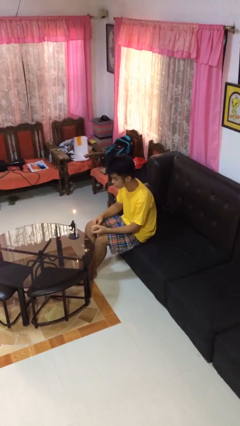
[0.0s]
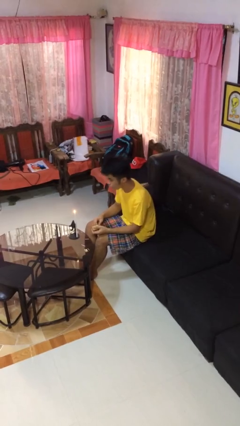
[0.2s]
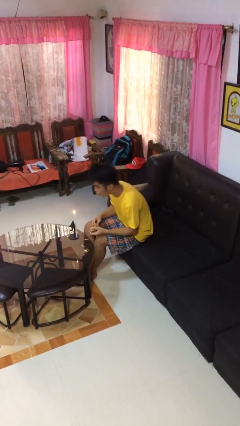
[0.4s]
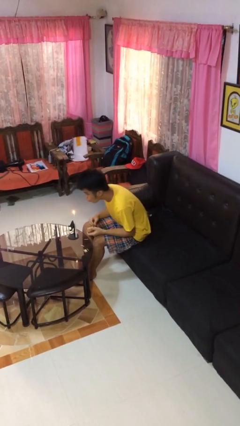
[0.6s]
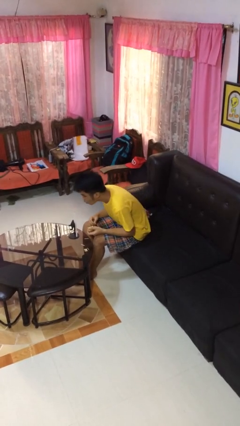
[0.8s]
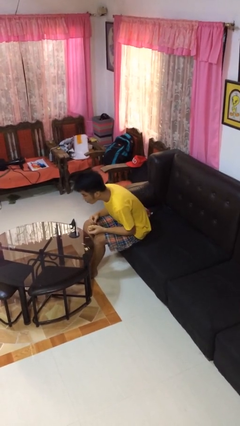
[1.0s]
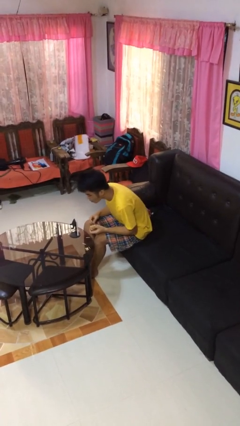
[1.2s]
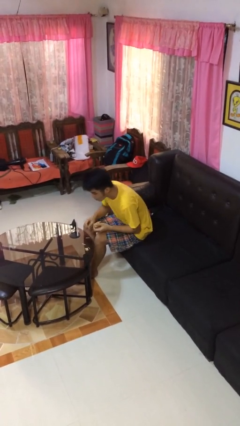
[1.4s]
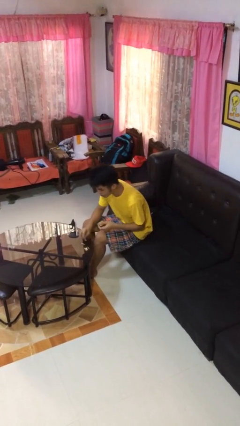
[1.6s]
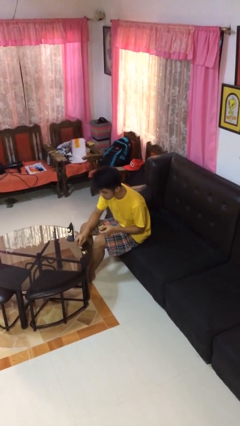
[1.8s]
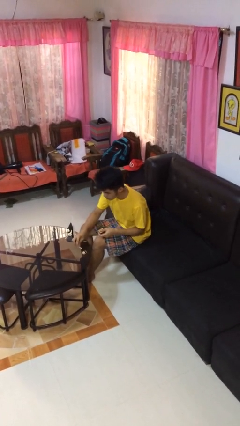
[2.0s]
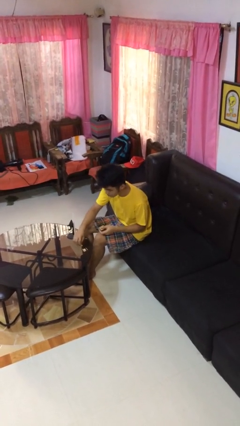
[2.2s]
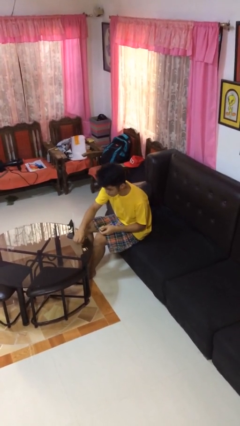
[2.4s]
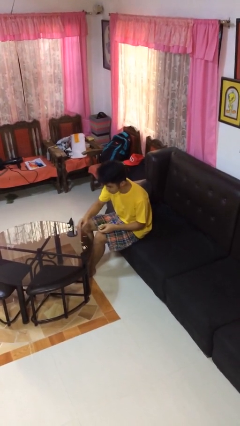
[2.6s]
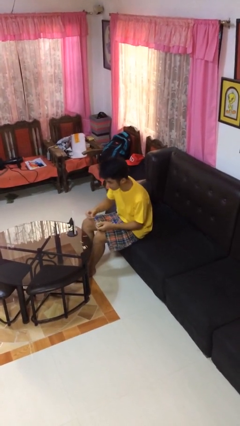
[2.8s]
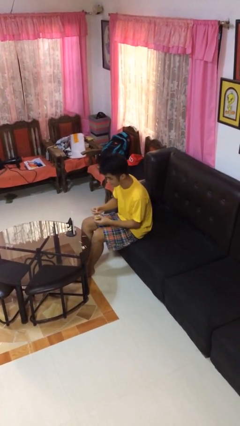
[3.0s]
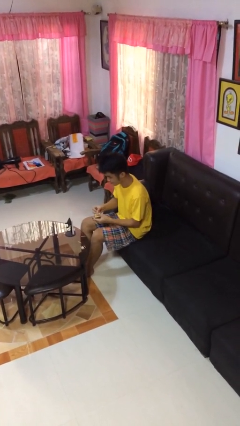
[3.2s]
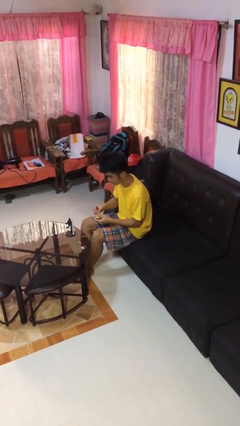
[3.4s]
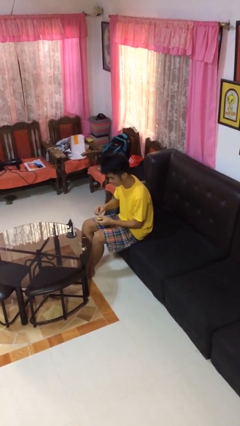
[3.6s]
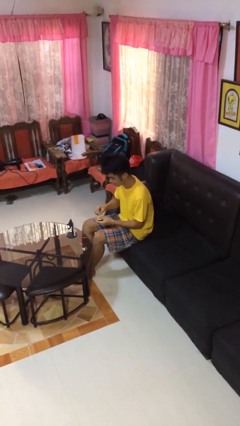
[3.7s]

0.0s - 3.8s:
person extinguishes candle

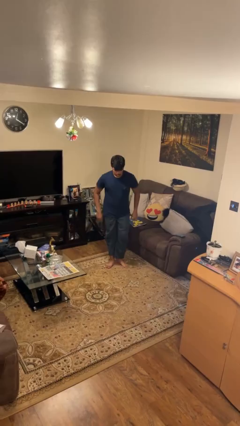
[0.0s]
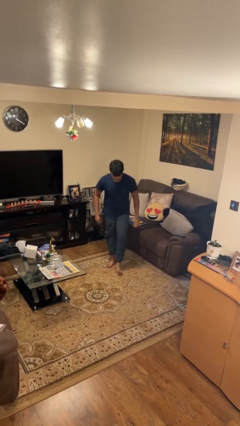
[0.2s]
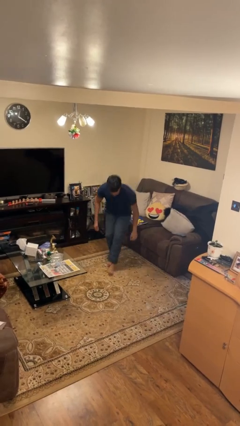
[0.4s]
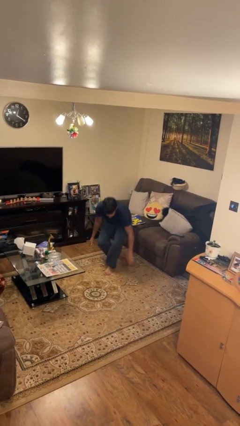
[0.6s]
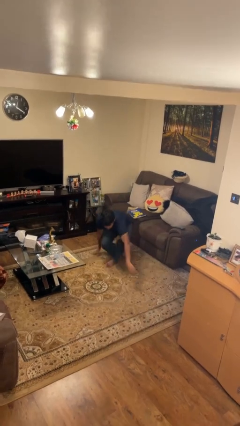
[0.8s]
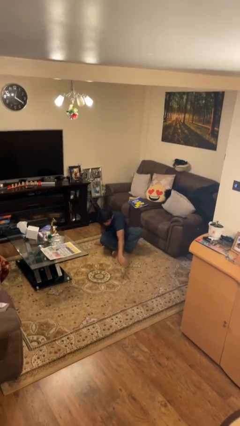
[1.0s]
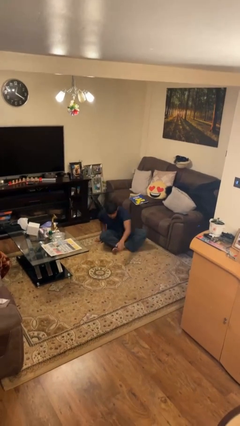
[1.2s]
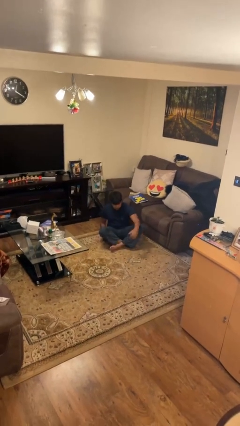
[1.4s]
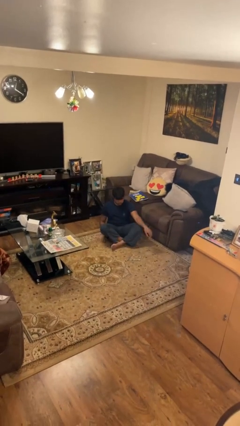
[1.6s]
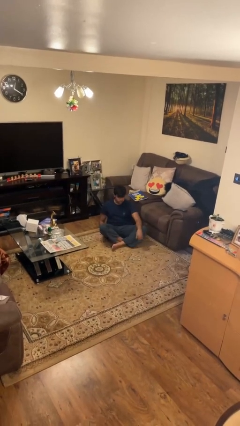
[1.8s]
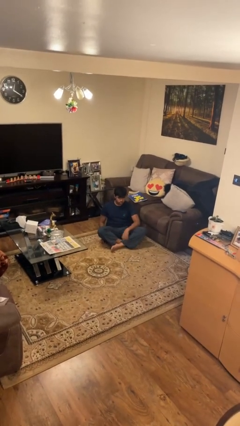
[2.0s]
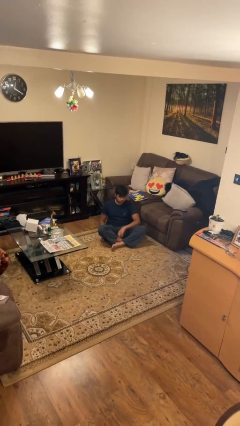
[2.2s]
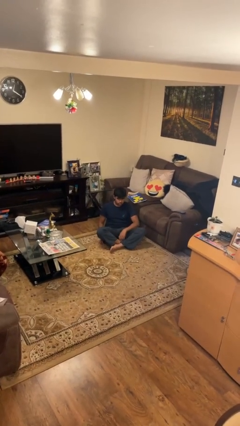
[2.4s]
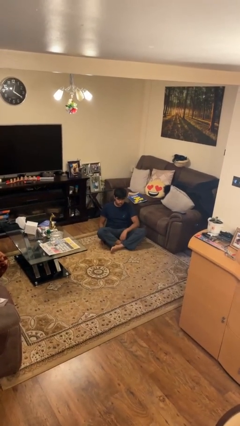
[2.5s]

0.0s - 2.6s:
person sits crisscross

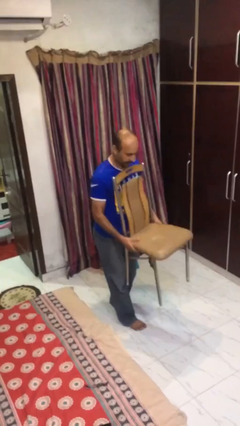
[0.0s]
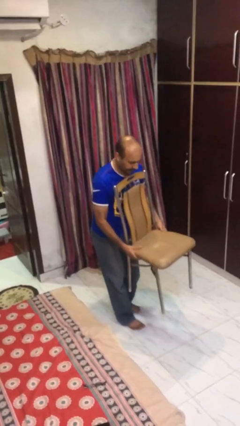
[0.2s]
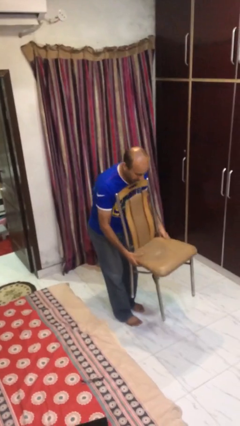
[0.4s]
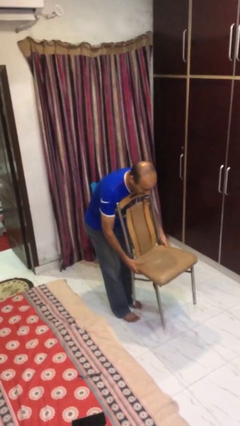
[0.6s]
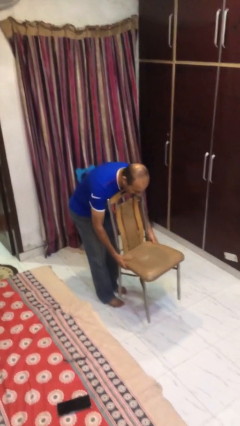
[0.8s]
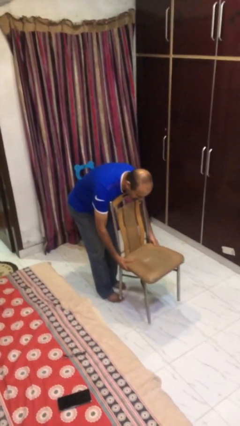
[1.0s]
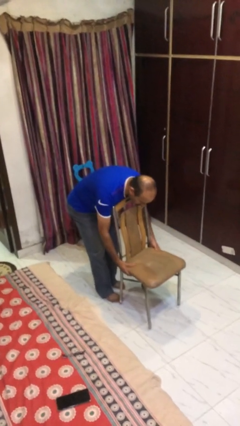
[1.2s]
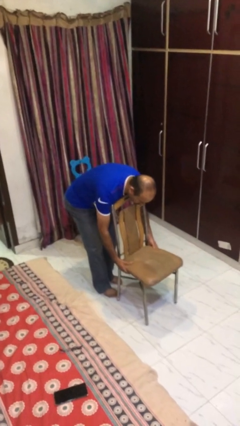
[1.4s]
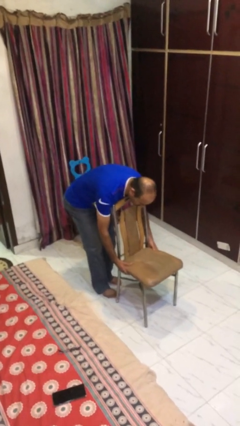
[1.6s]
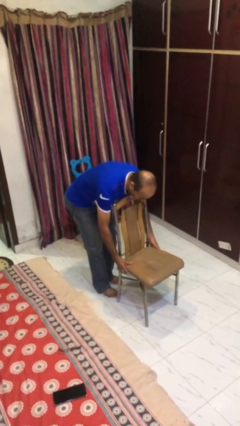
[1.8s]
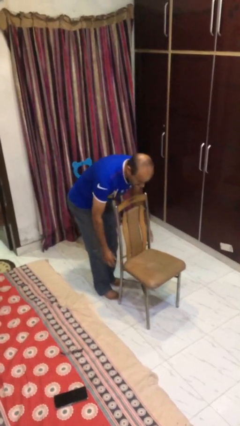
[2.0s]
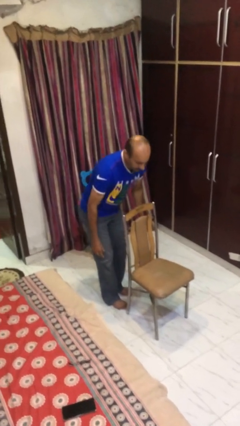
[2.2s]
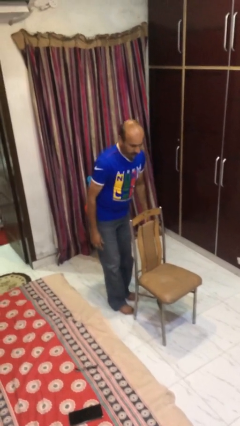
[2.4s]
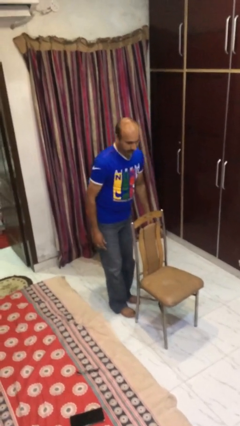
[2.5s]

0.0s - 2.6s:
person puts down object on floor

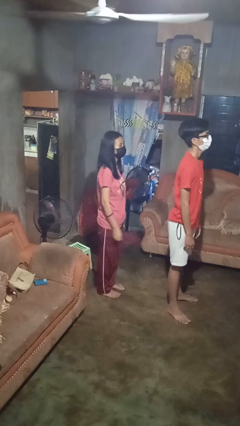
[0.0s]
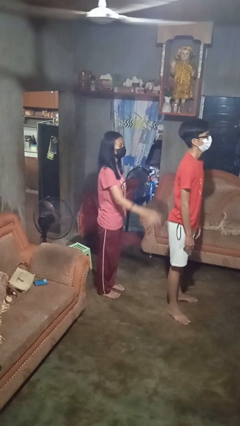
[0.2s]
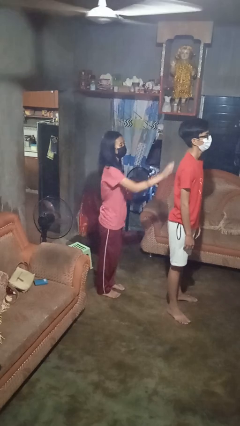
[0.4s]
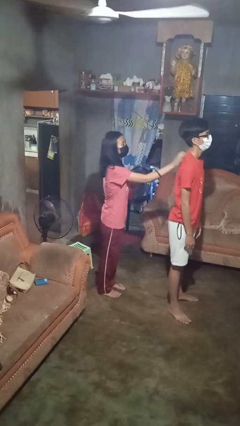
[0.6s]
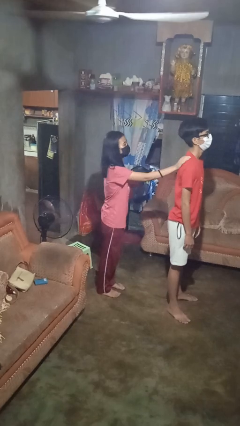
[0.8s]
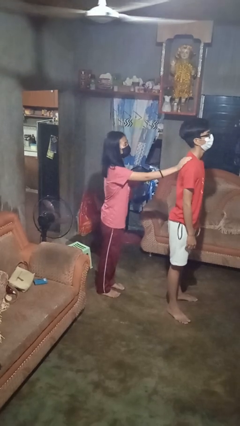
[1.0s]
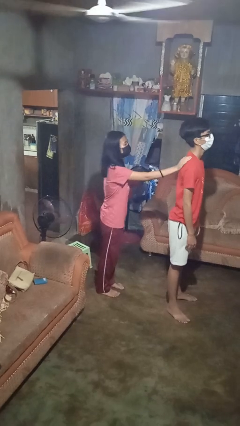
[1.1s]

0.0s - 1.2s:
person touches back of person

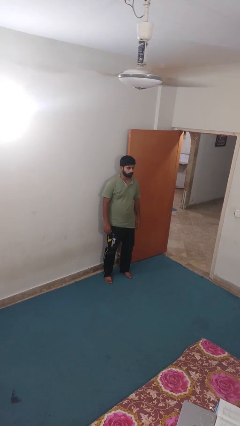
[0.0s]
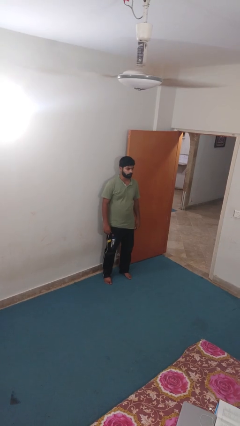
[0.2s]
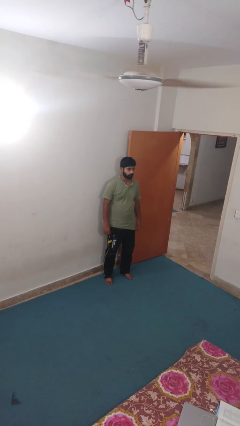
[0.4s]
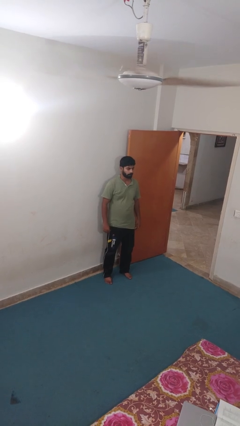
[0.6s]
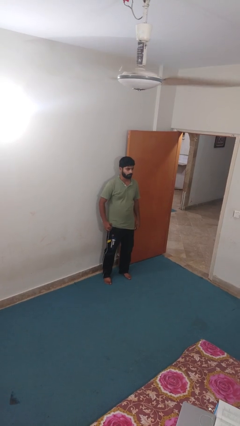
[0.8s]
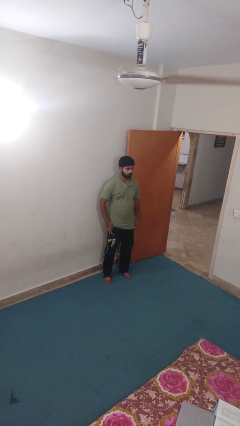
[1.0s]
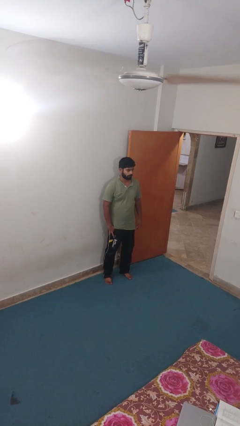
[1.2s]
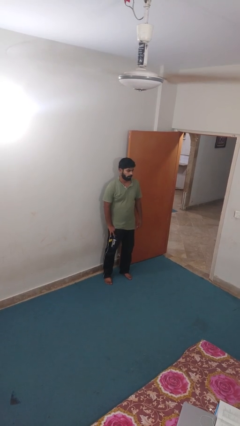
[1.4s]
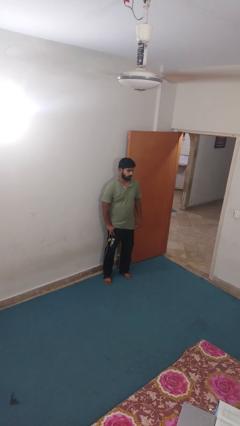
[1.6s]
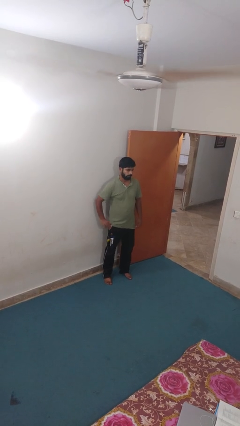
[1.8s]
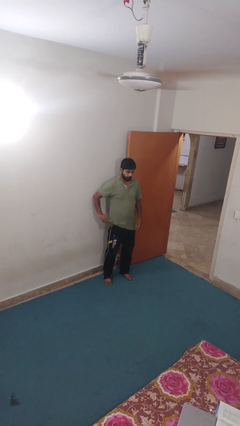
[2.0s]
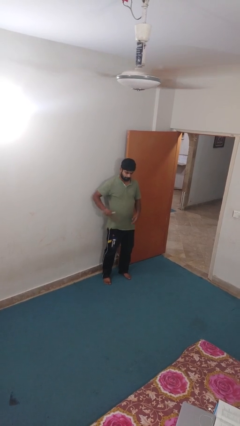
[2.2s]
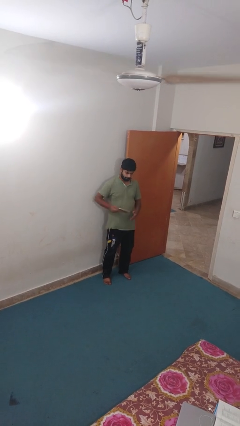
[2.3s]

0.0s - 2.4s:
person takes phone from pocket

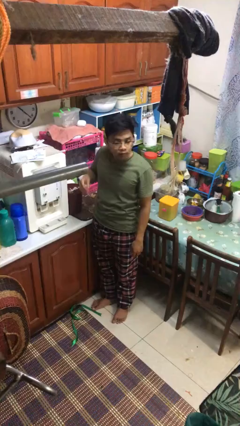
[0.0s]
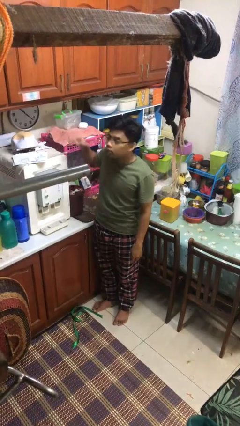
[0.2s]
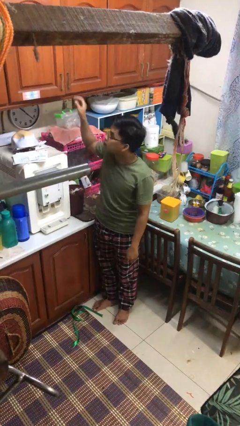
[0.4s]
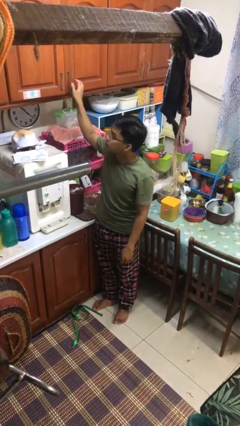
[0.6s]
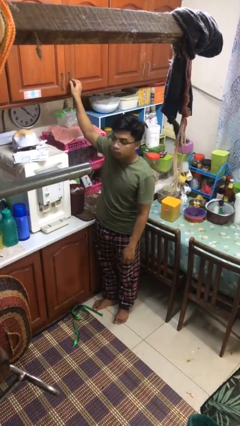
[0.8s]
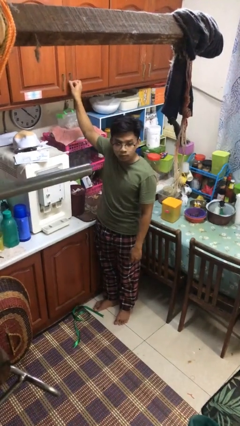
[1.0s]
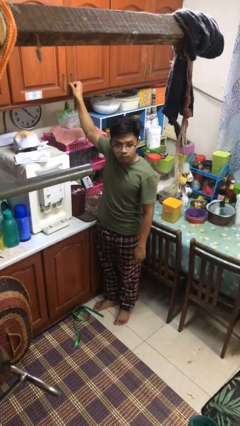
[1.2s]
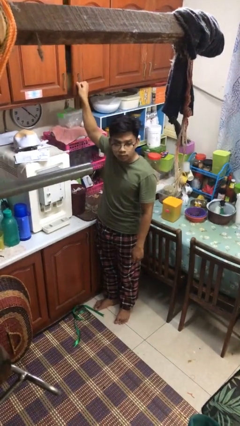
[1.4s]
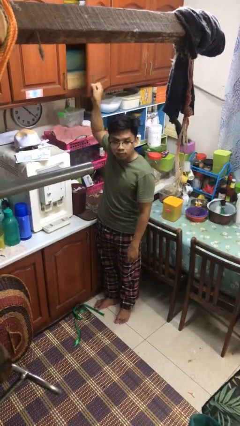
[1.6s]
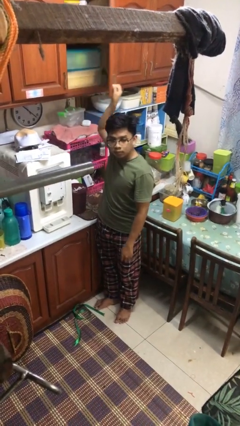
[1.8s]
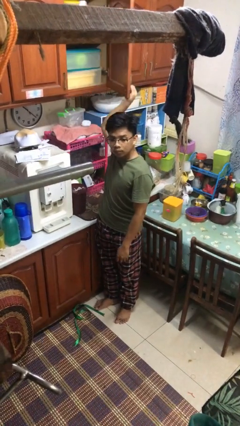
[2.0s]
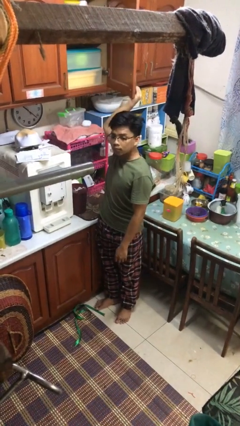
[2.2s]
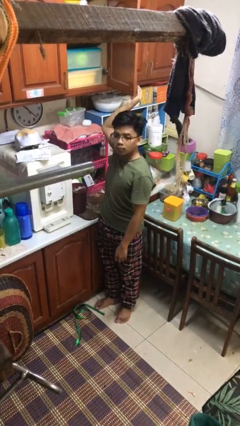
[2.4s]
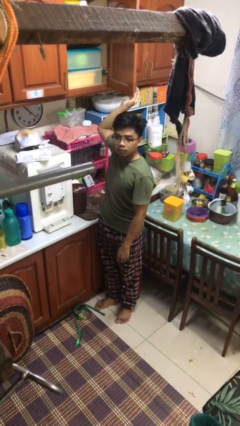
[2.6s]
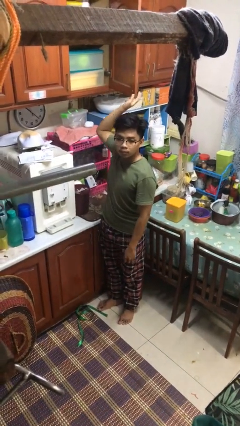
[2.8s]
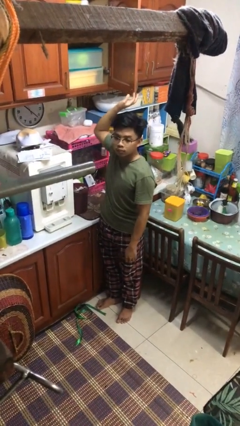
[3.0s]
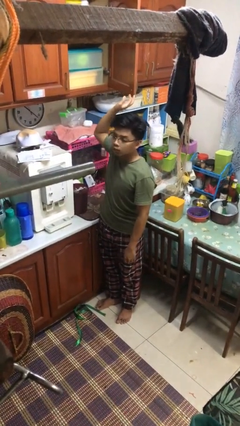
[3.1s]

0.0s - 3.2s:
person opens kitchen drawer

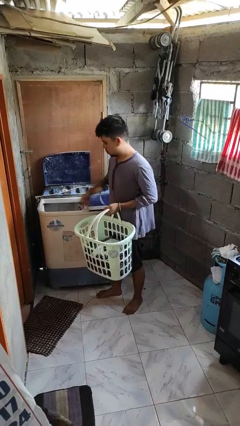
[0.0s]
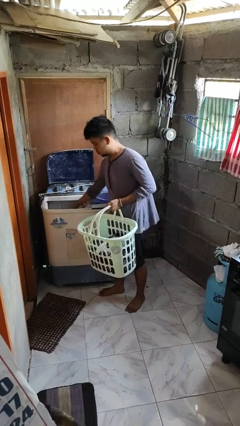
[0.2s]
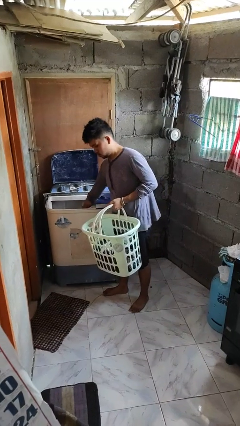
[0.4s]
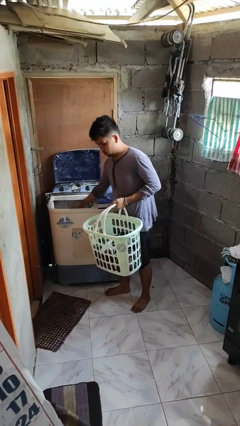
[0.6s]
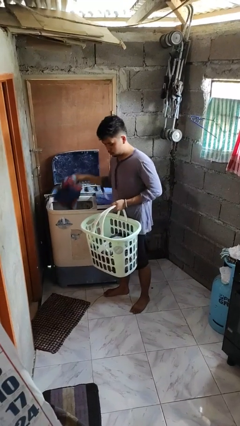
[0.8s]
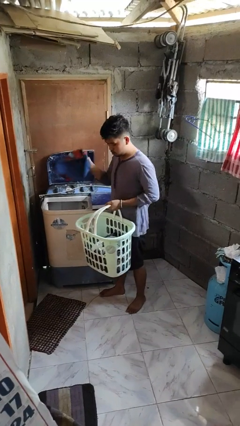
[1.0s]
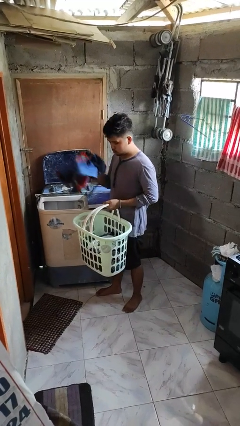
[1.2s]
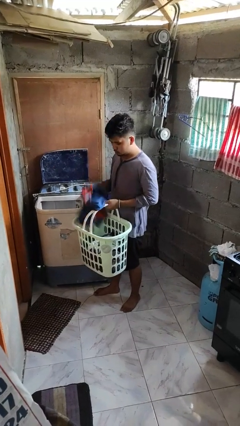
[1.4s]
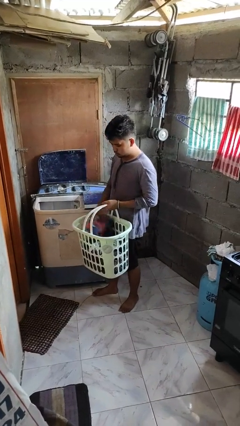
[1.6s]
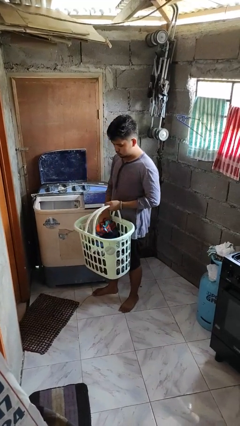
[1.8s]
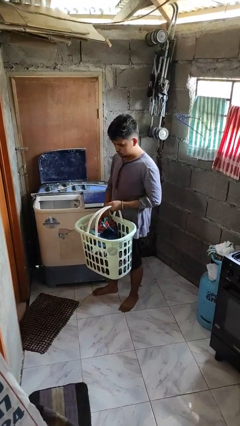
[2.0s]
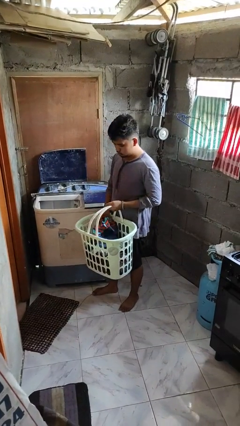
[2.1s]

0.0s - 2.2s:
person unloads clotheswasher
